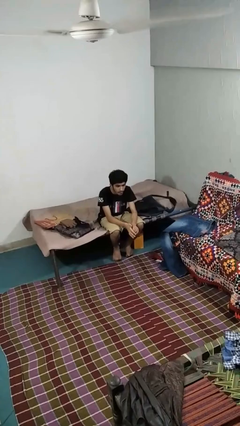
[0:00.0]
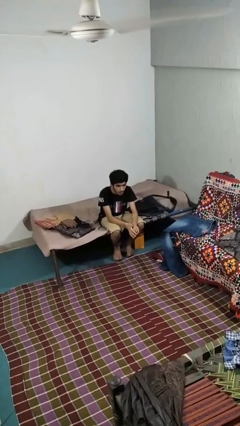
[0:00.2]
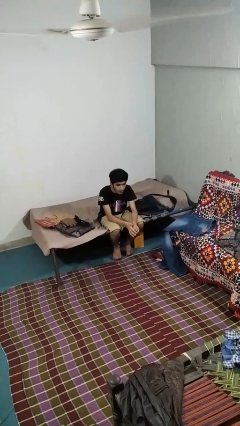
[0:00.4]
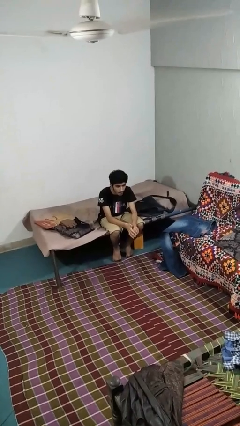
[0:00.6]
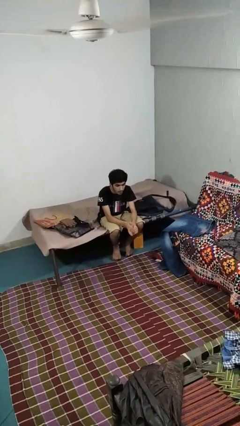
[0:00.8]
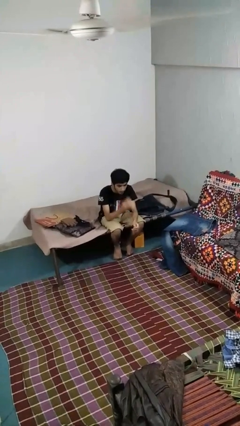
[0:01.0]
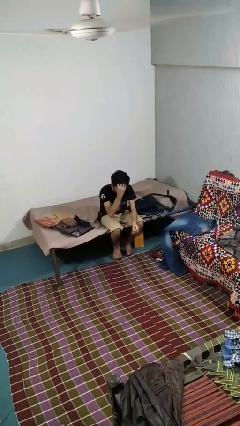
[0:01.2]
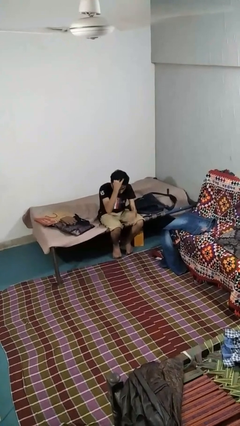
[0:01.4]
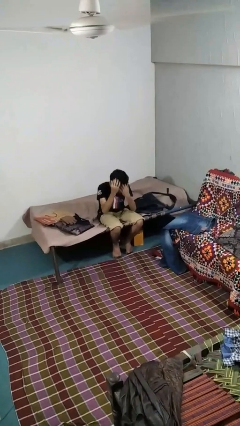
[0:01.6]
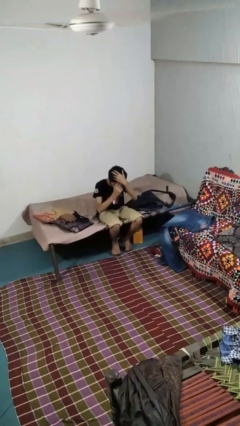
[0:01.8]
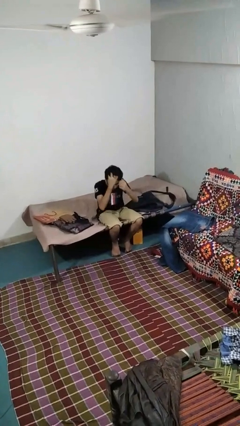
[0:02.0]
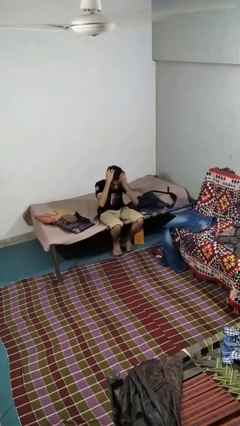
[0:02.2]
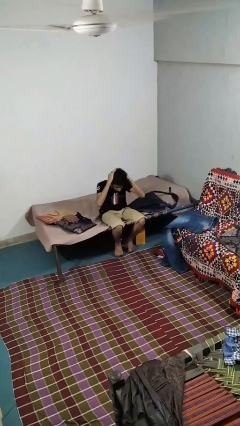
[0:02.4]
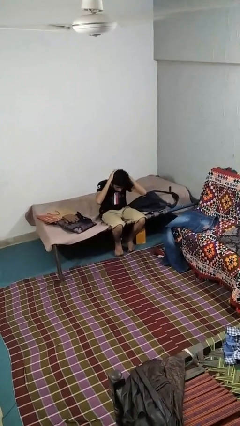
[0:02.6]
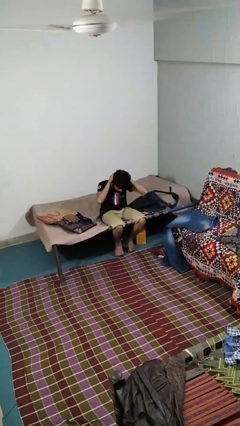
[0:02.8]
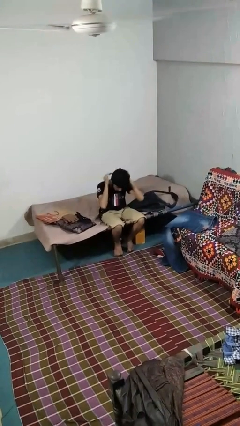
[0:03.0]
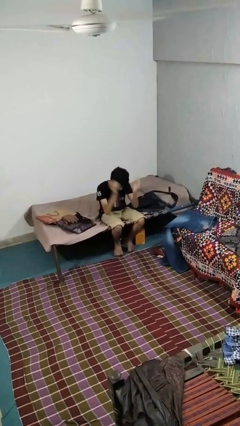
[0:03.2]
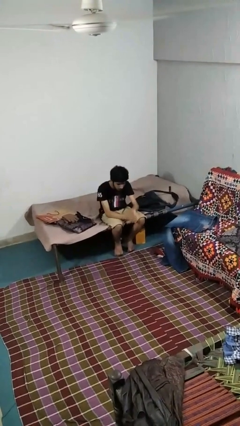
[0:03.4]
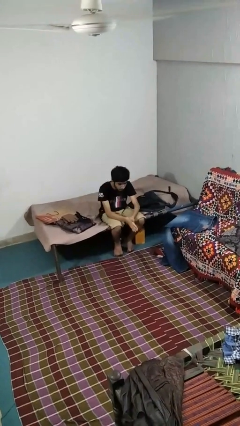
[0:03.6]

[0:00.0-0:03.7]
person strokes hair

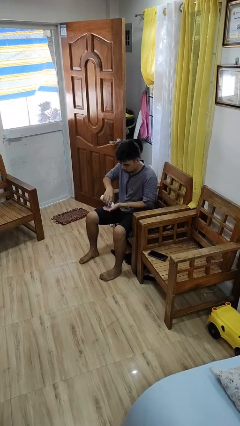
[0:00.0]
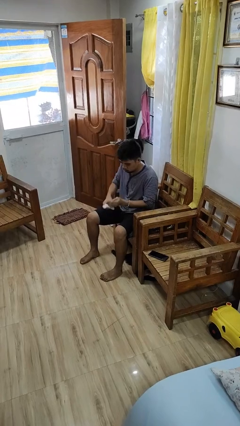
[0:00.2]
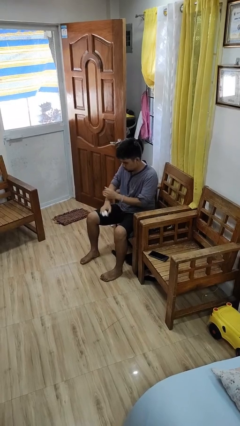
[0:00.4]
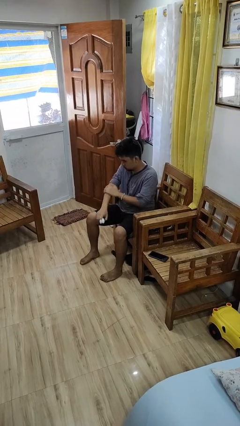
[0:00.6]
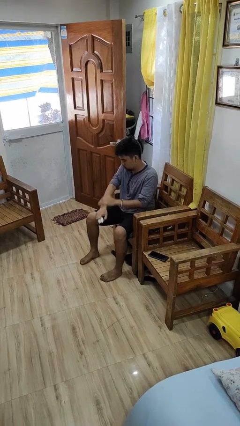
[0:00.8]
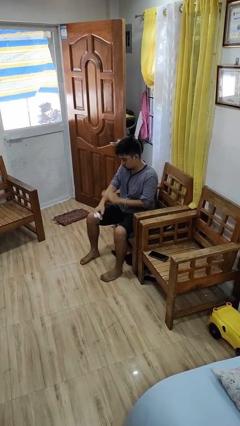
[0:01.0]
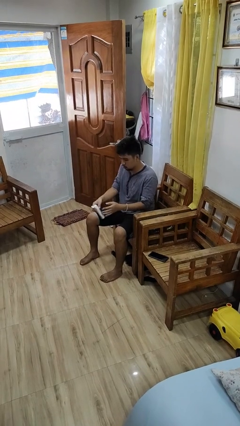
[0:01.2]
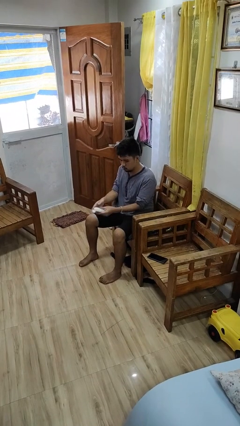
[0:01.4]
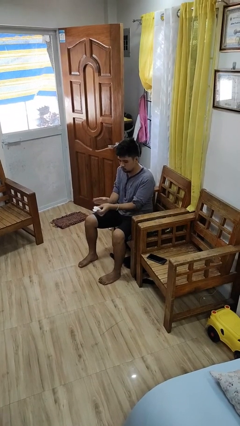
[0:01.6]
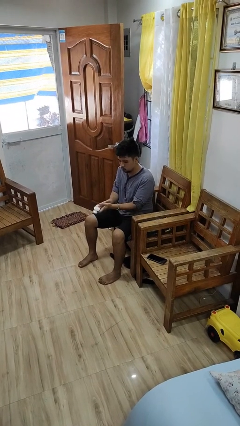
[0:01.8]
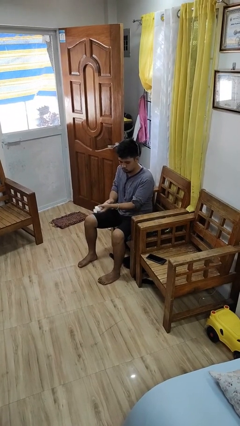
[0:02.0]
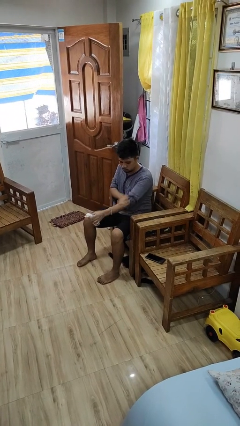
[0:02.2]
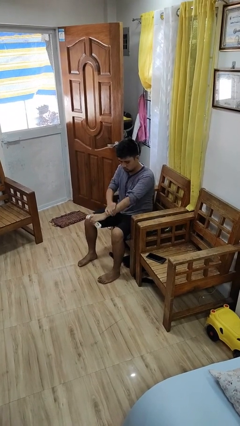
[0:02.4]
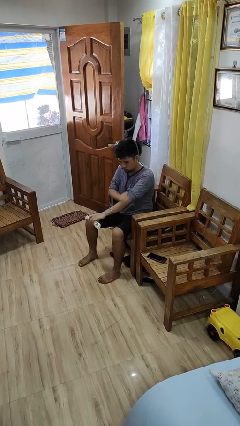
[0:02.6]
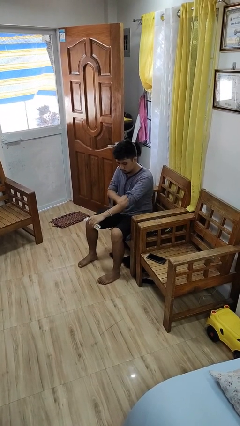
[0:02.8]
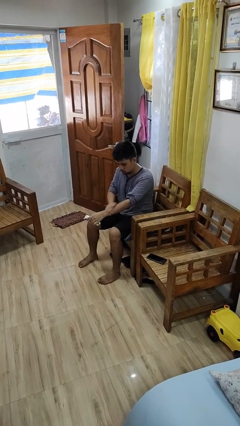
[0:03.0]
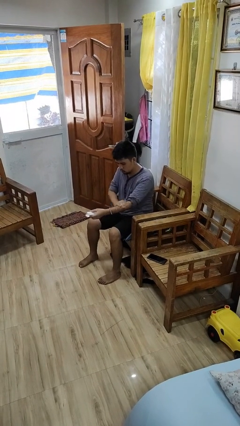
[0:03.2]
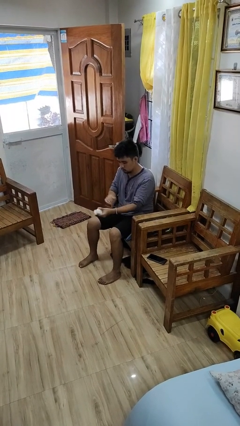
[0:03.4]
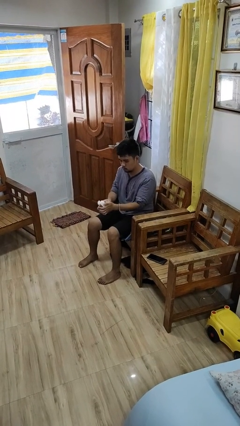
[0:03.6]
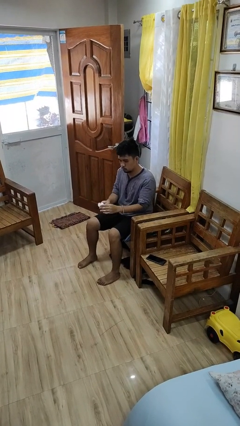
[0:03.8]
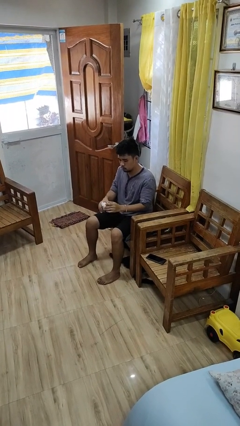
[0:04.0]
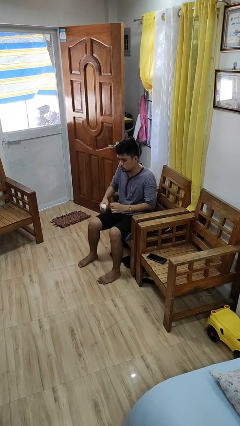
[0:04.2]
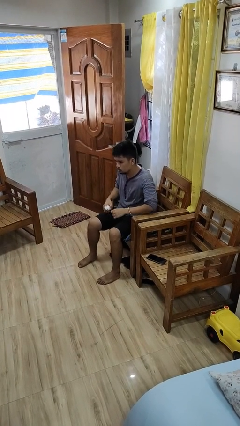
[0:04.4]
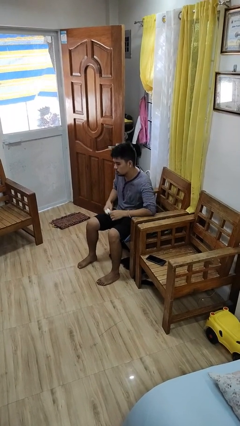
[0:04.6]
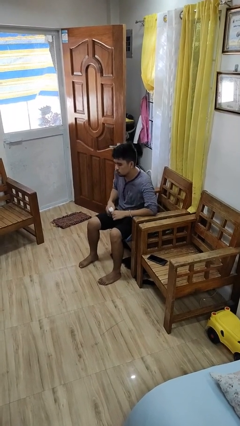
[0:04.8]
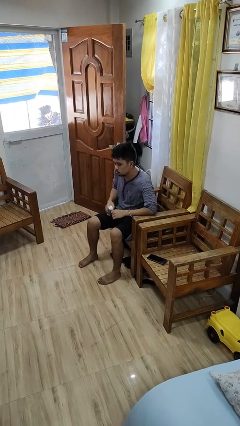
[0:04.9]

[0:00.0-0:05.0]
person applies sunscreen

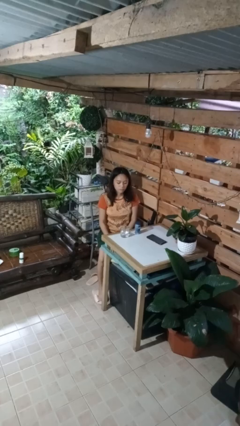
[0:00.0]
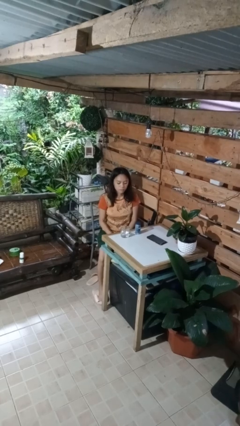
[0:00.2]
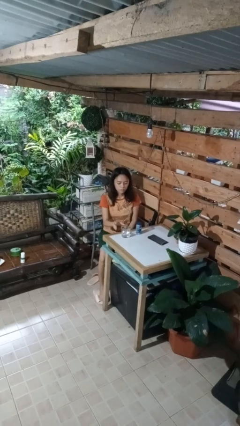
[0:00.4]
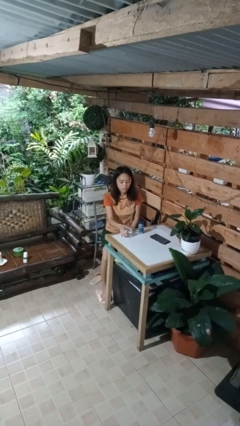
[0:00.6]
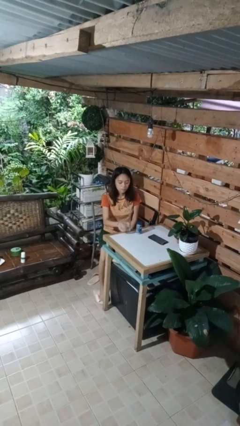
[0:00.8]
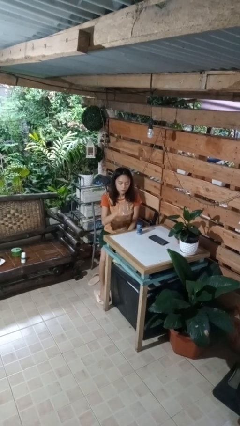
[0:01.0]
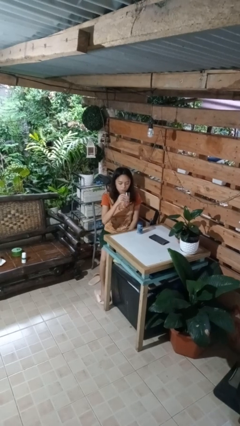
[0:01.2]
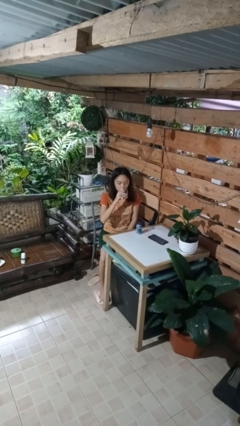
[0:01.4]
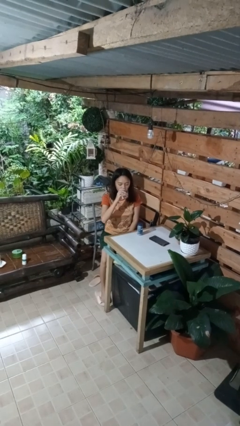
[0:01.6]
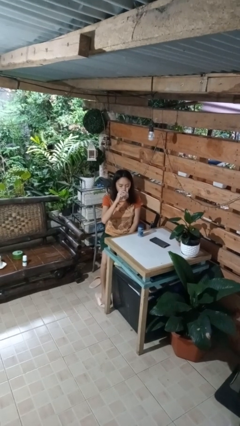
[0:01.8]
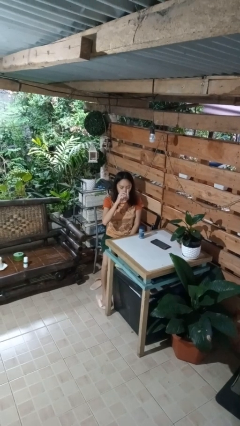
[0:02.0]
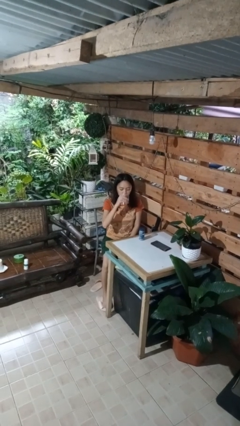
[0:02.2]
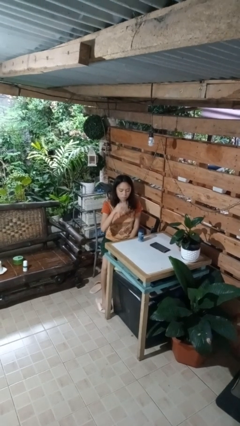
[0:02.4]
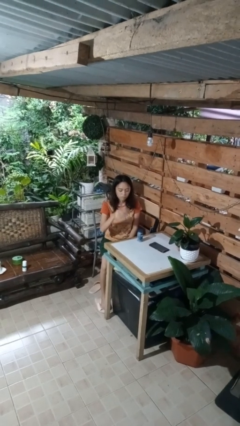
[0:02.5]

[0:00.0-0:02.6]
person drinks from cup

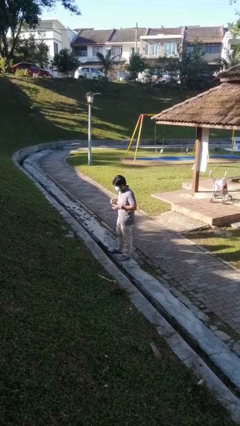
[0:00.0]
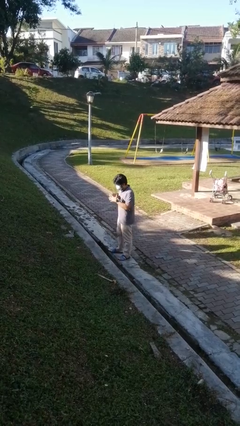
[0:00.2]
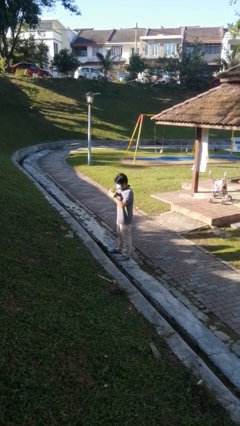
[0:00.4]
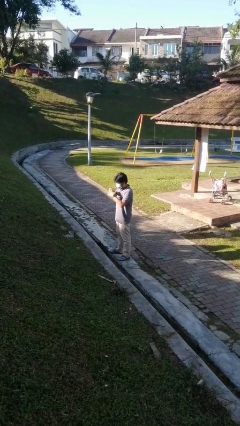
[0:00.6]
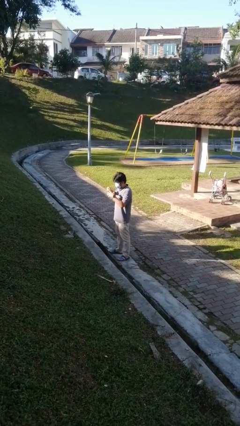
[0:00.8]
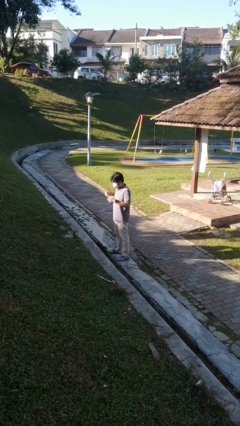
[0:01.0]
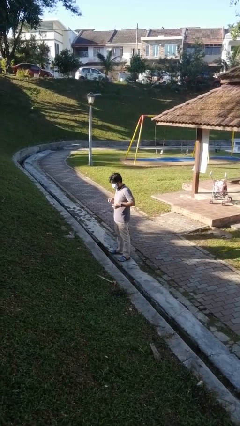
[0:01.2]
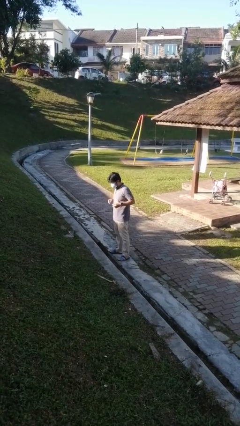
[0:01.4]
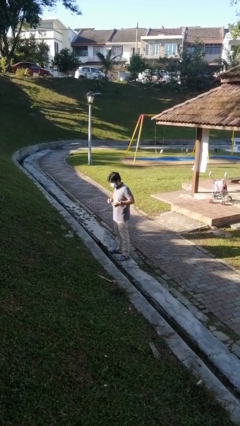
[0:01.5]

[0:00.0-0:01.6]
person takes off ring

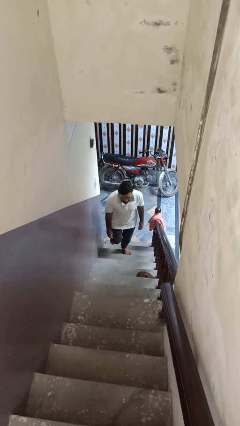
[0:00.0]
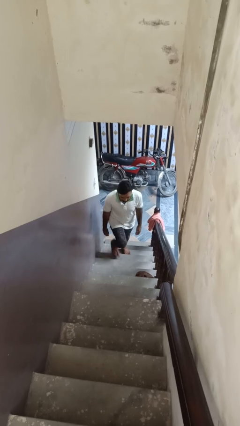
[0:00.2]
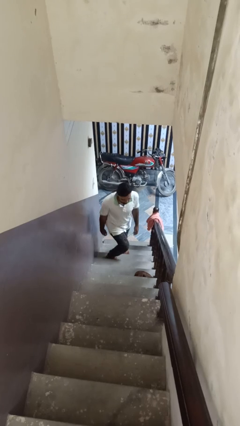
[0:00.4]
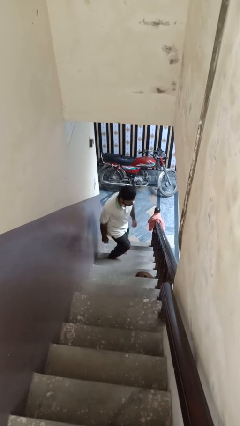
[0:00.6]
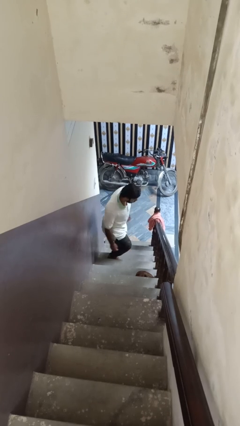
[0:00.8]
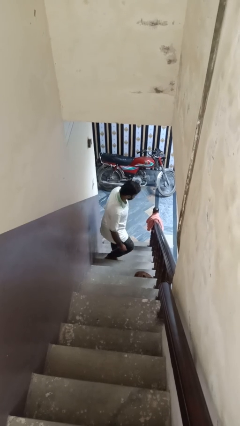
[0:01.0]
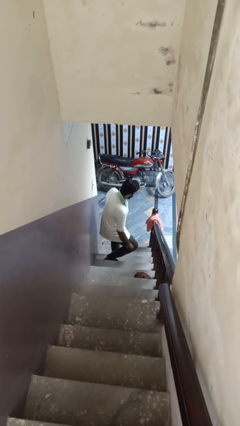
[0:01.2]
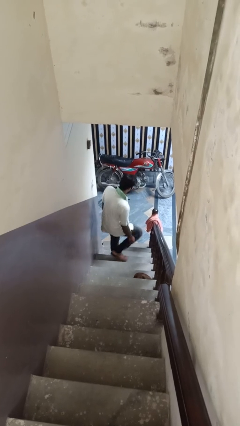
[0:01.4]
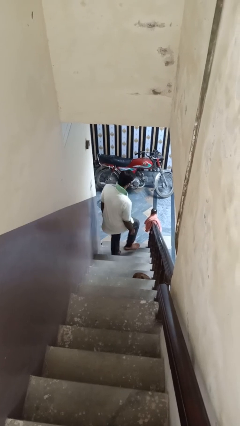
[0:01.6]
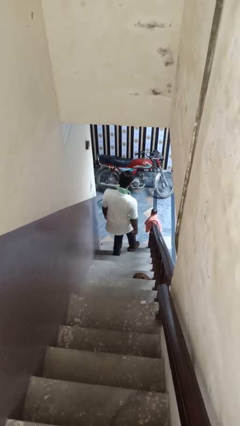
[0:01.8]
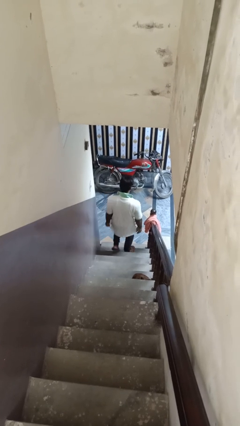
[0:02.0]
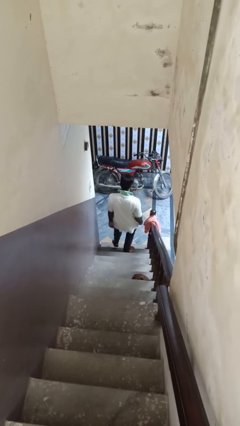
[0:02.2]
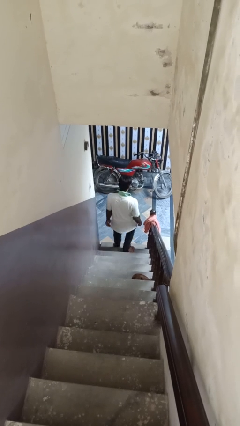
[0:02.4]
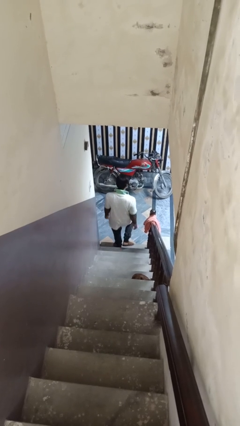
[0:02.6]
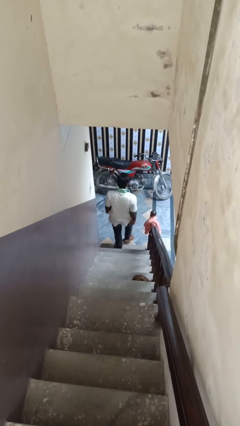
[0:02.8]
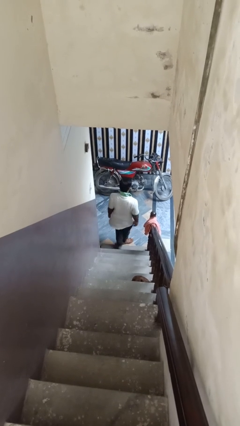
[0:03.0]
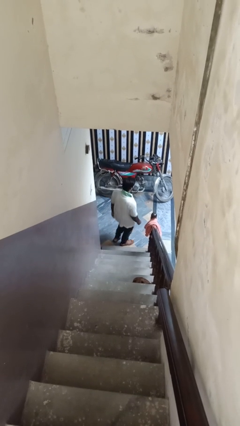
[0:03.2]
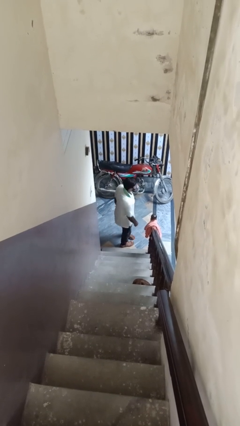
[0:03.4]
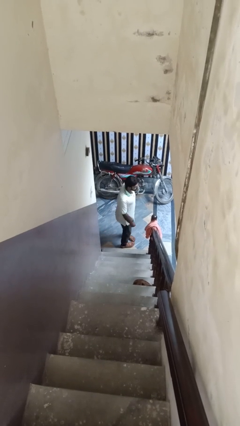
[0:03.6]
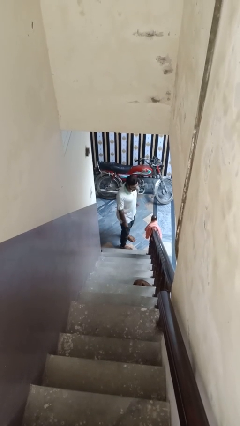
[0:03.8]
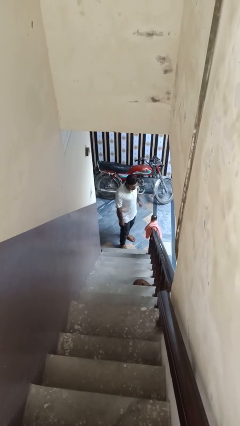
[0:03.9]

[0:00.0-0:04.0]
person climbs down ladder

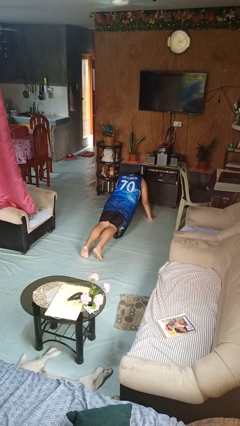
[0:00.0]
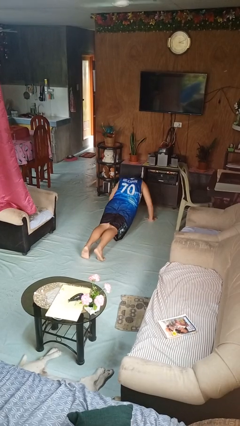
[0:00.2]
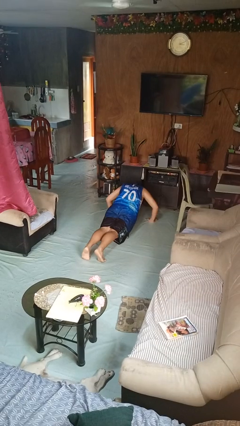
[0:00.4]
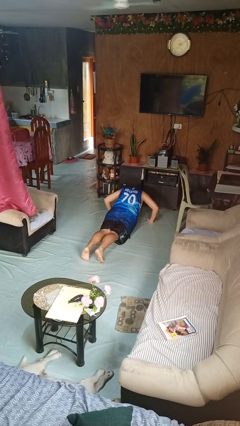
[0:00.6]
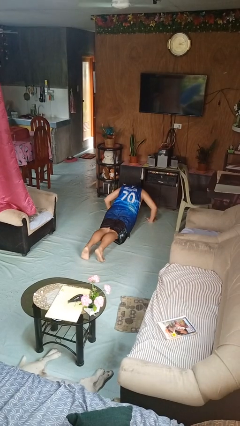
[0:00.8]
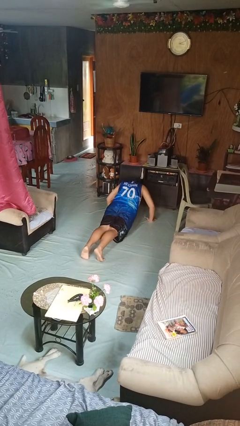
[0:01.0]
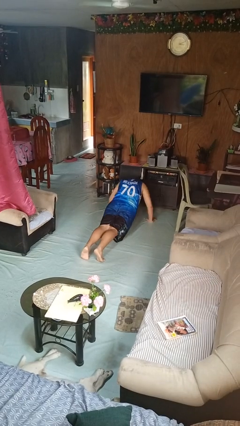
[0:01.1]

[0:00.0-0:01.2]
person exercises with pushup
